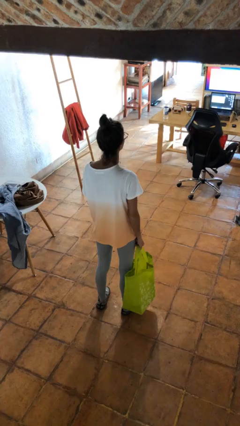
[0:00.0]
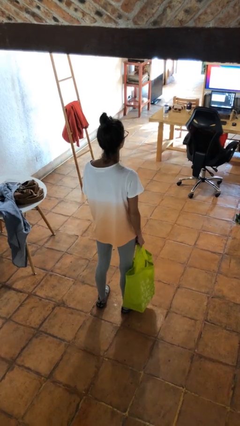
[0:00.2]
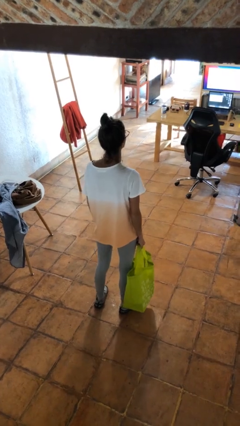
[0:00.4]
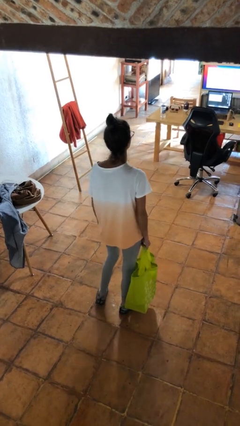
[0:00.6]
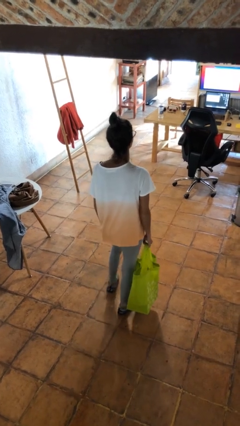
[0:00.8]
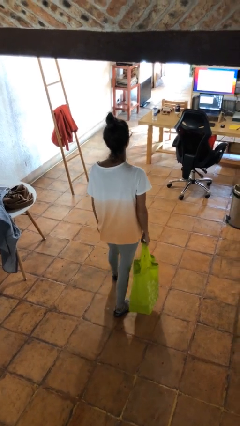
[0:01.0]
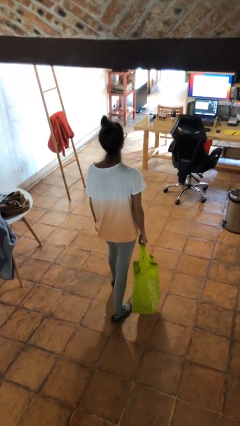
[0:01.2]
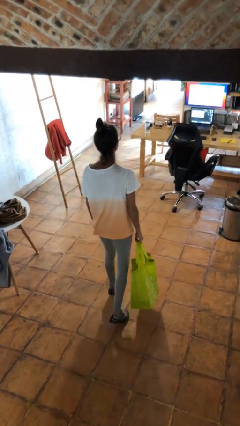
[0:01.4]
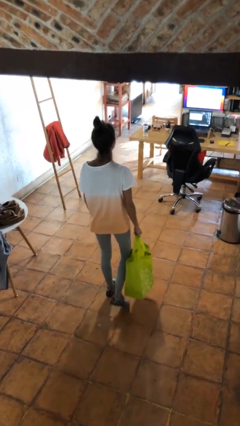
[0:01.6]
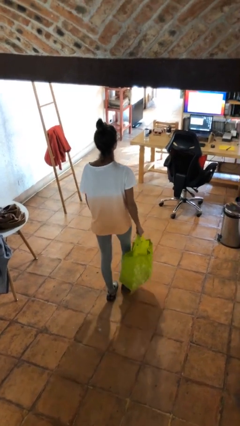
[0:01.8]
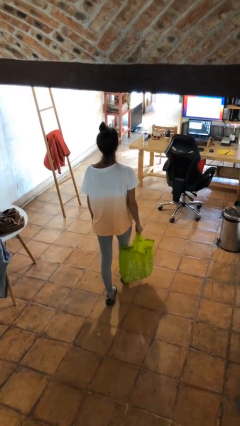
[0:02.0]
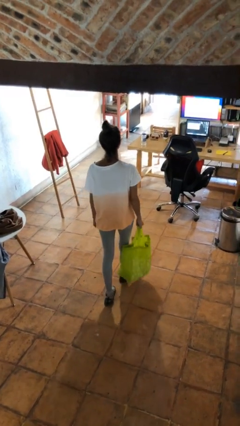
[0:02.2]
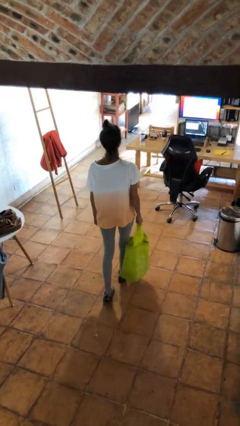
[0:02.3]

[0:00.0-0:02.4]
person carries groceries

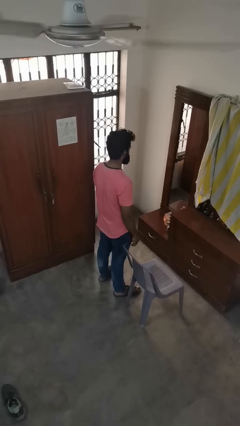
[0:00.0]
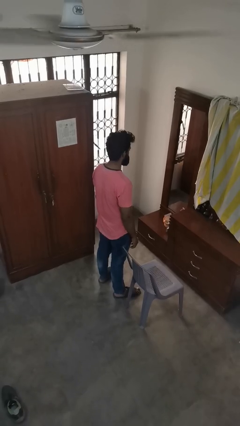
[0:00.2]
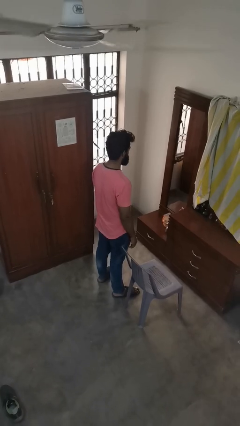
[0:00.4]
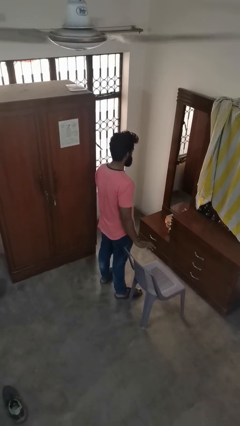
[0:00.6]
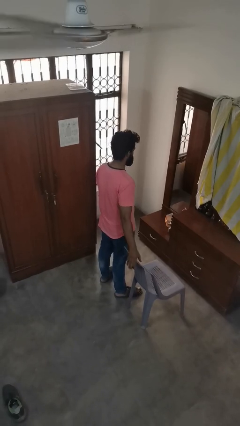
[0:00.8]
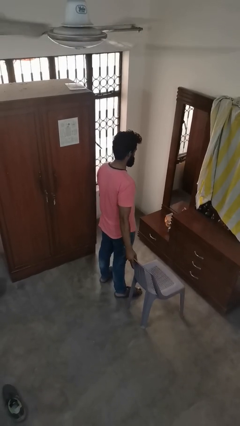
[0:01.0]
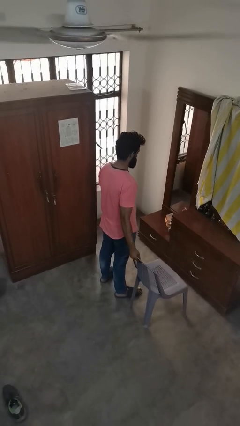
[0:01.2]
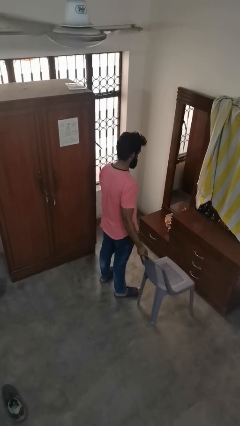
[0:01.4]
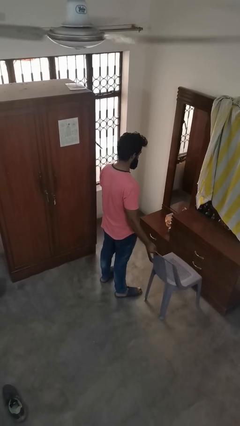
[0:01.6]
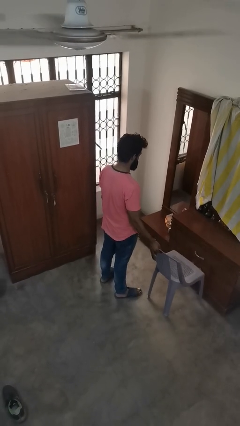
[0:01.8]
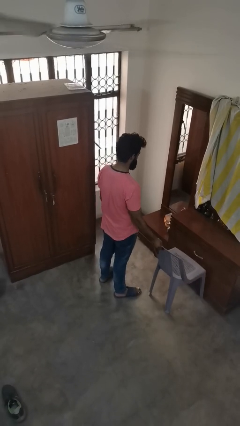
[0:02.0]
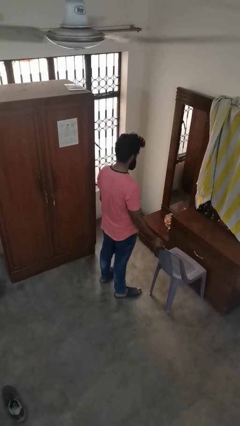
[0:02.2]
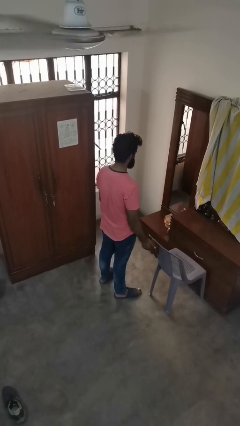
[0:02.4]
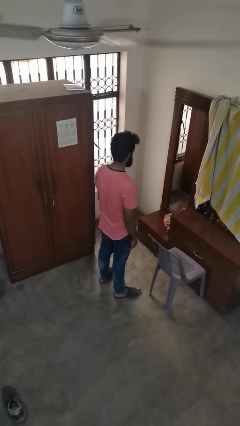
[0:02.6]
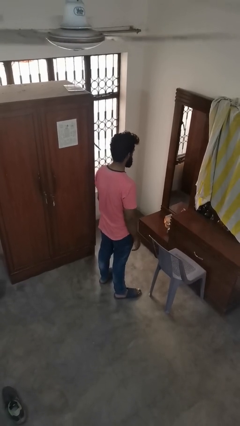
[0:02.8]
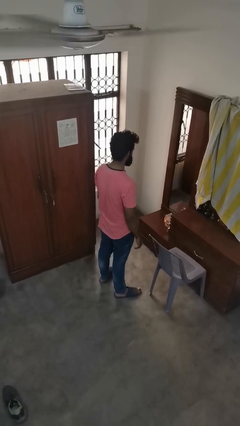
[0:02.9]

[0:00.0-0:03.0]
person pushes in chair

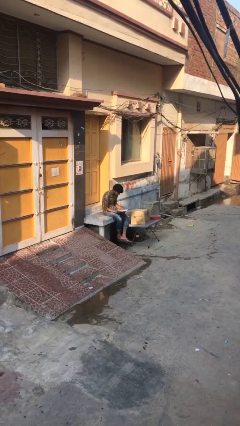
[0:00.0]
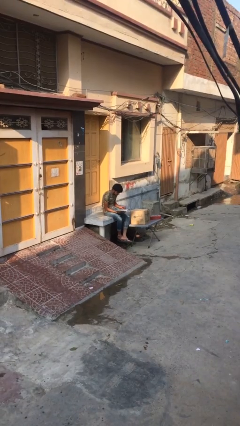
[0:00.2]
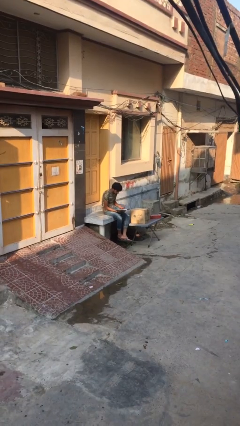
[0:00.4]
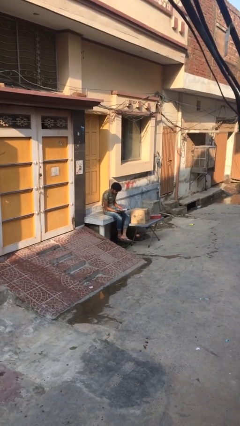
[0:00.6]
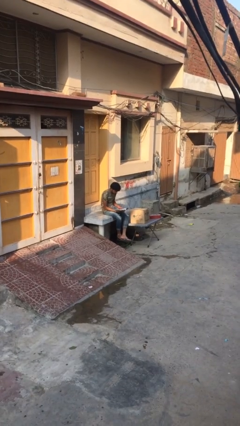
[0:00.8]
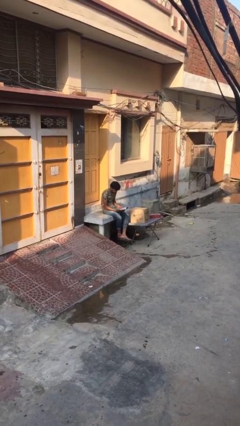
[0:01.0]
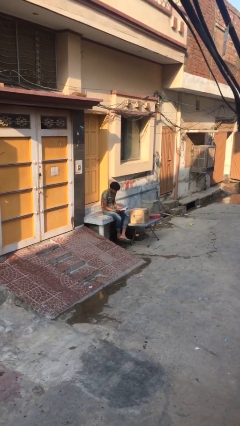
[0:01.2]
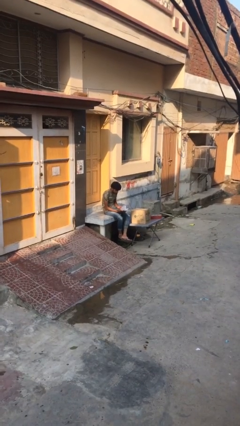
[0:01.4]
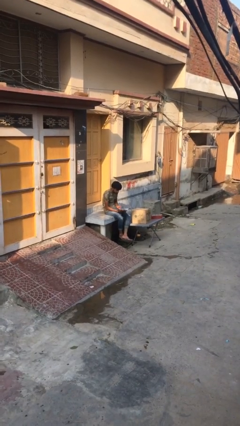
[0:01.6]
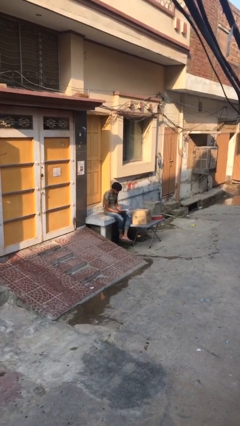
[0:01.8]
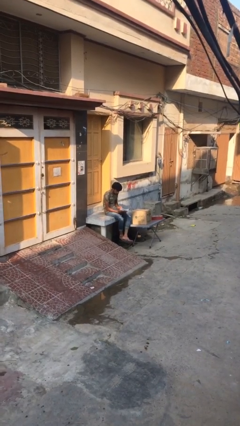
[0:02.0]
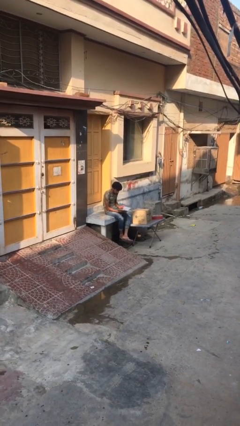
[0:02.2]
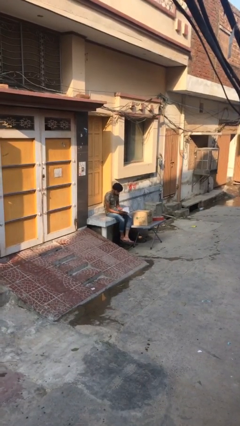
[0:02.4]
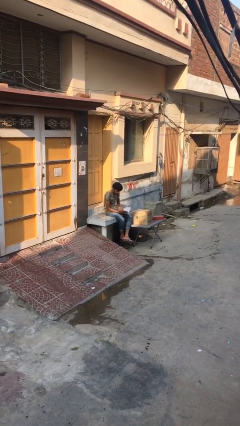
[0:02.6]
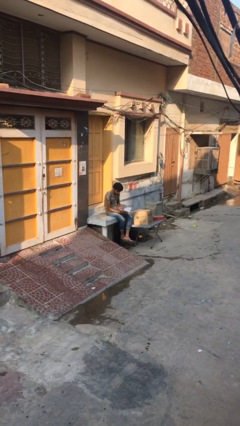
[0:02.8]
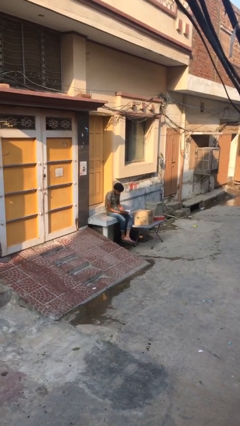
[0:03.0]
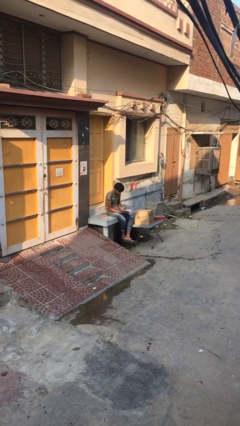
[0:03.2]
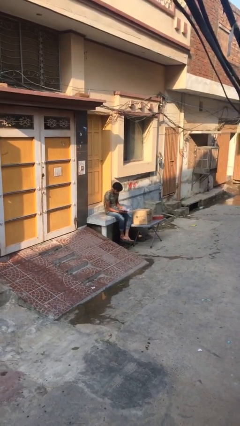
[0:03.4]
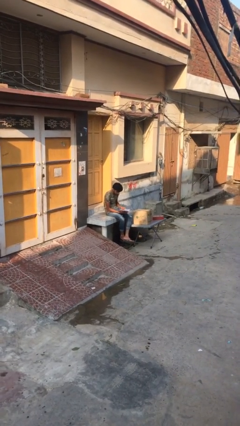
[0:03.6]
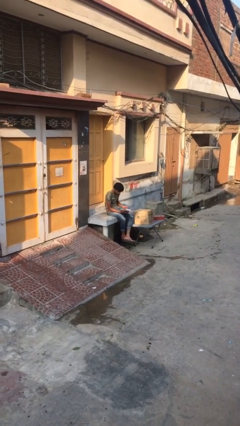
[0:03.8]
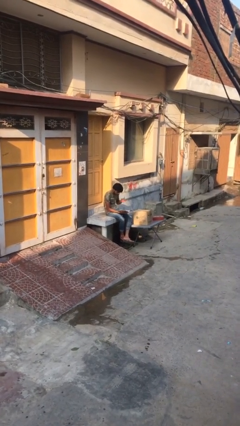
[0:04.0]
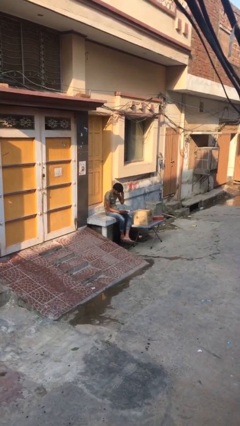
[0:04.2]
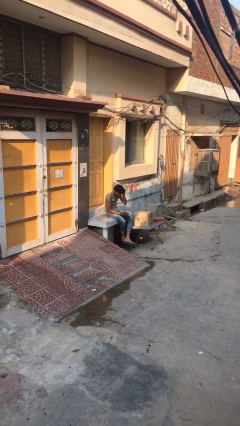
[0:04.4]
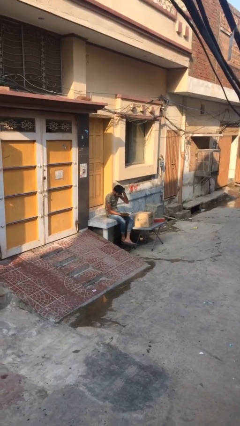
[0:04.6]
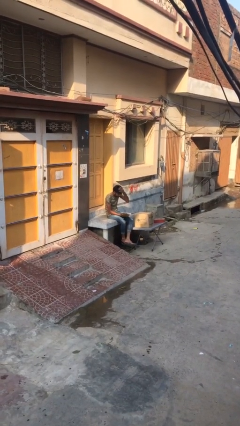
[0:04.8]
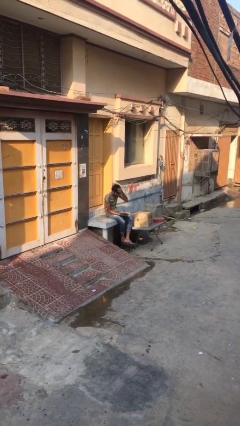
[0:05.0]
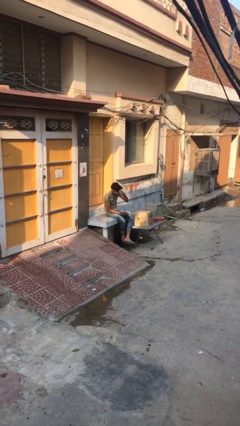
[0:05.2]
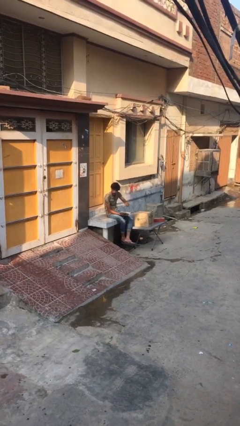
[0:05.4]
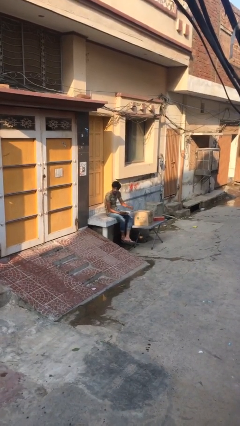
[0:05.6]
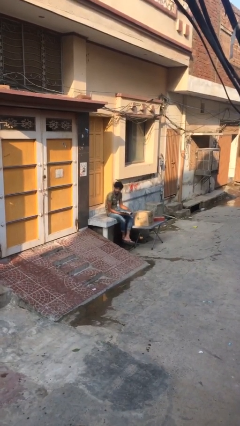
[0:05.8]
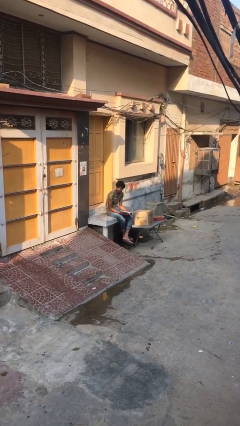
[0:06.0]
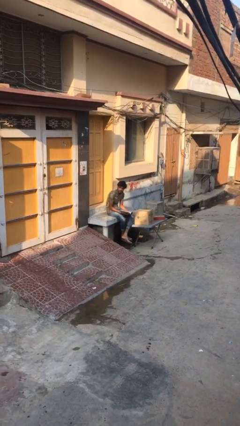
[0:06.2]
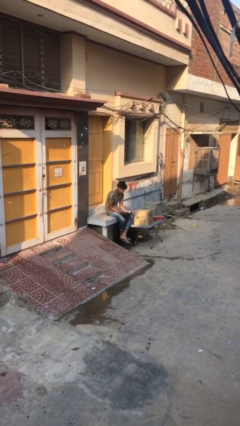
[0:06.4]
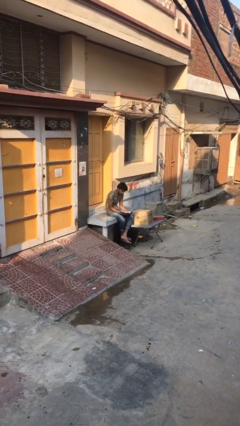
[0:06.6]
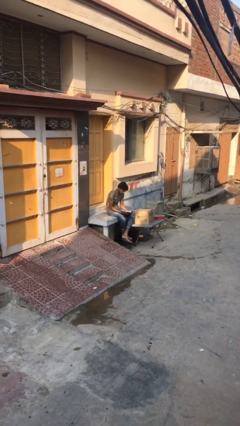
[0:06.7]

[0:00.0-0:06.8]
person reads document

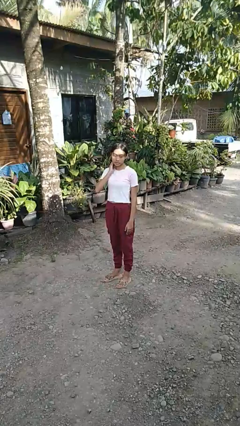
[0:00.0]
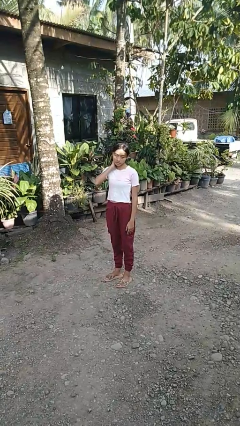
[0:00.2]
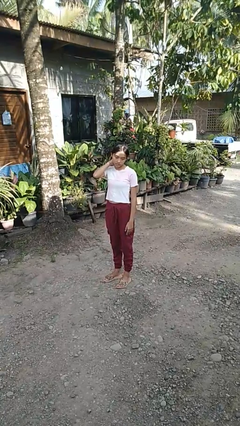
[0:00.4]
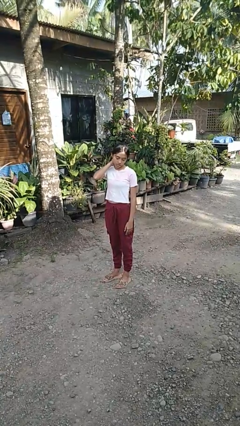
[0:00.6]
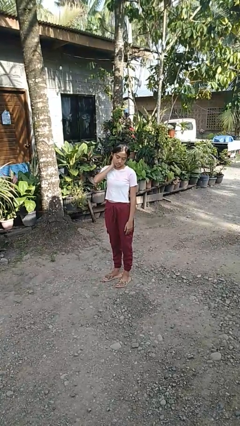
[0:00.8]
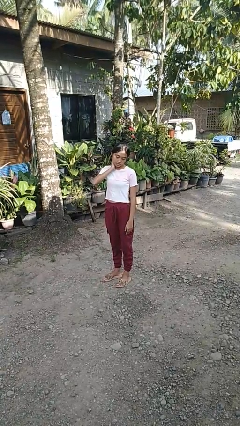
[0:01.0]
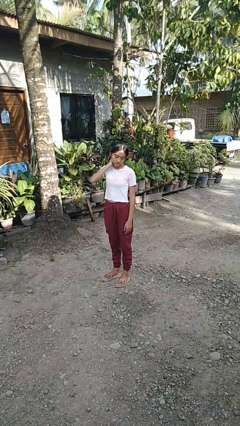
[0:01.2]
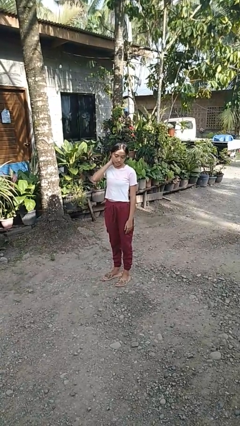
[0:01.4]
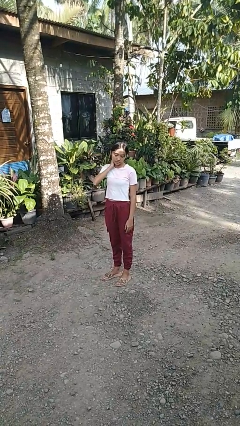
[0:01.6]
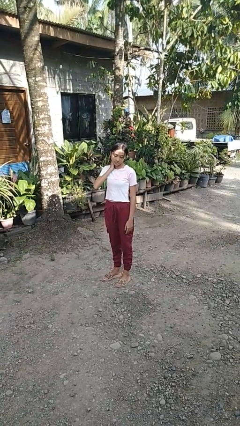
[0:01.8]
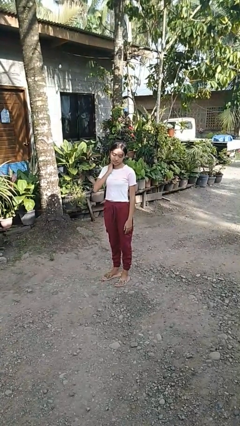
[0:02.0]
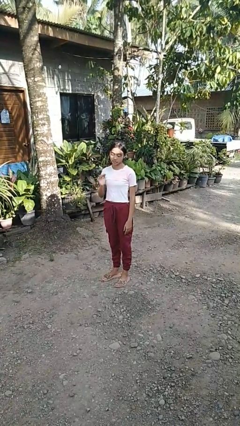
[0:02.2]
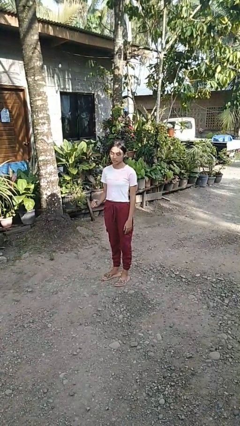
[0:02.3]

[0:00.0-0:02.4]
person rubs neck

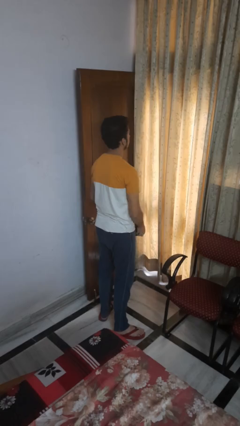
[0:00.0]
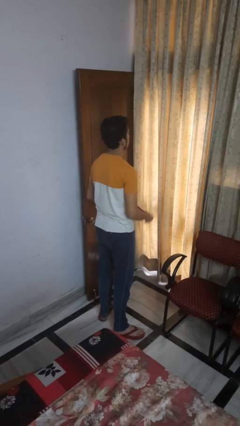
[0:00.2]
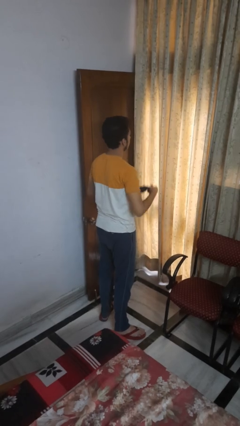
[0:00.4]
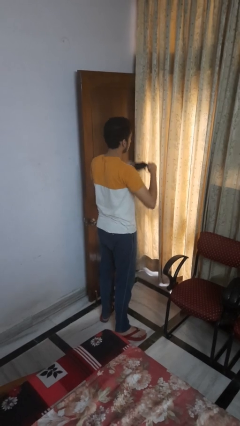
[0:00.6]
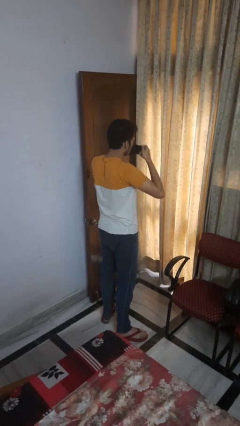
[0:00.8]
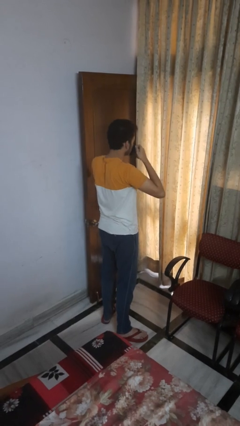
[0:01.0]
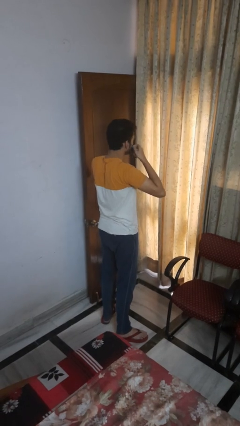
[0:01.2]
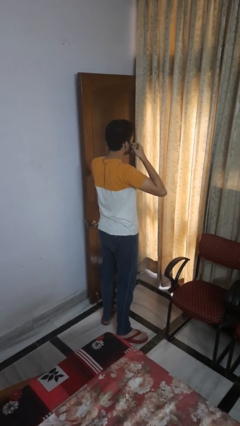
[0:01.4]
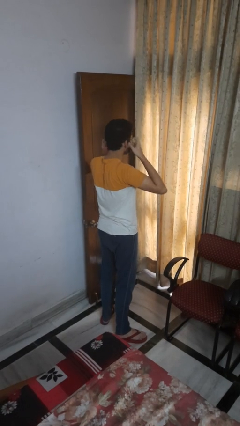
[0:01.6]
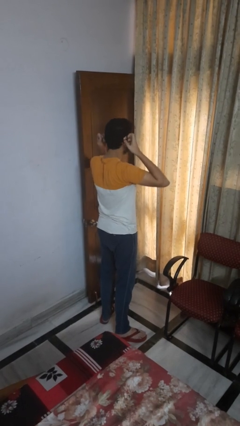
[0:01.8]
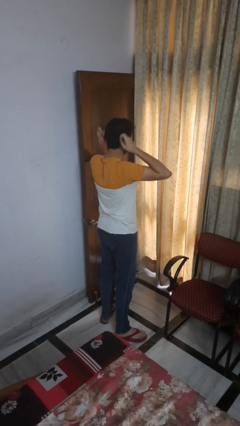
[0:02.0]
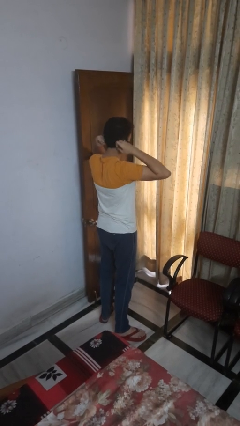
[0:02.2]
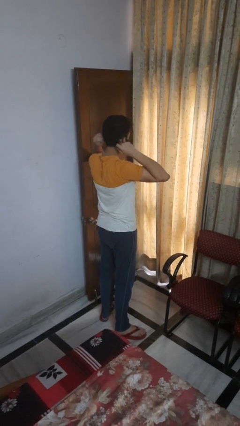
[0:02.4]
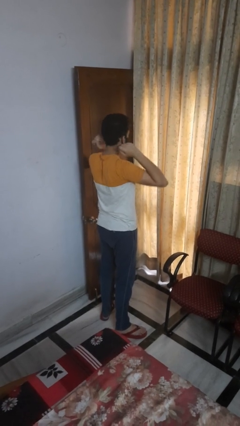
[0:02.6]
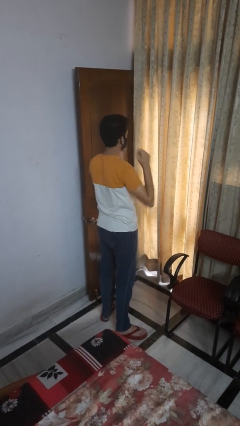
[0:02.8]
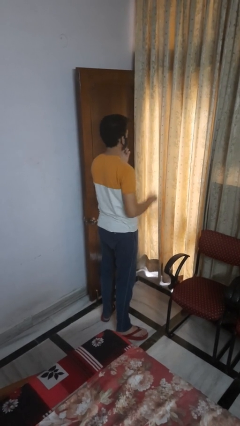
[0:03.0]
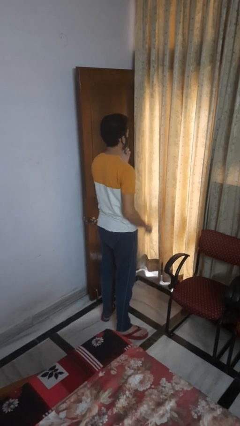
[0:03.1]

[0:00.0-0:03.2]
person puts on facemask
